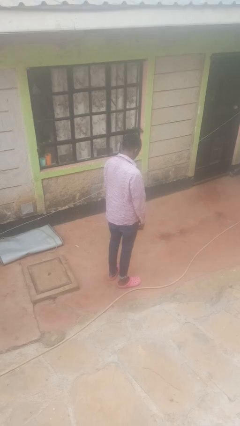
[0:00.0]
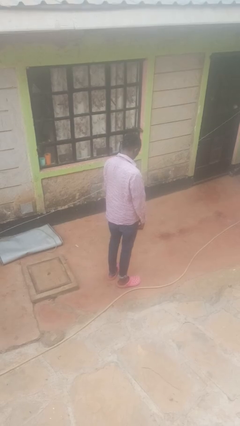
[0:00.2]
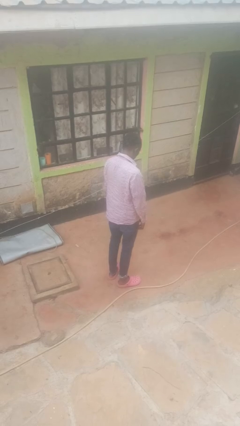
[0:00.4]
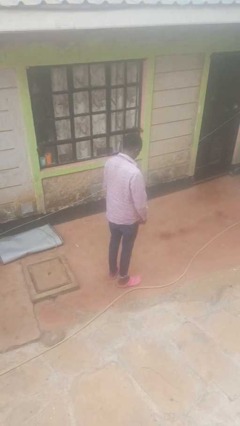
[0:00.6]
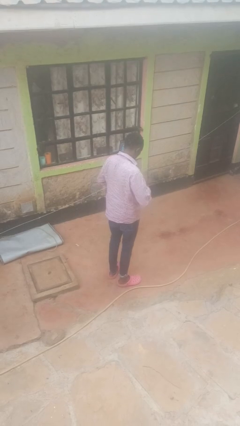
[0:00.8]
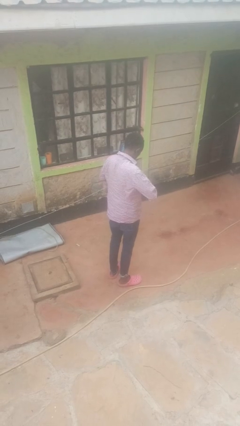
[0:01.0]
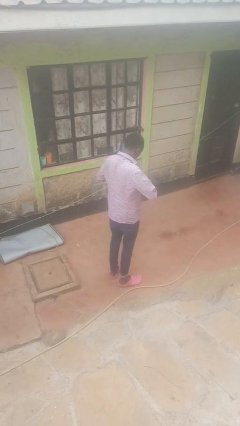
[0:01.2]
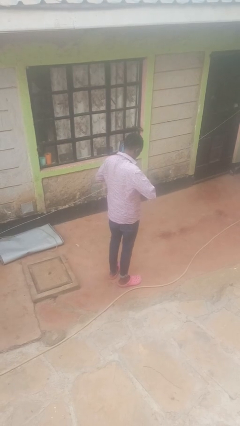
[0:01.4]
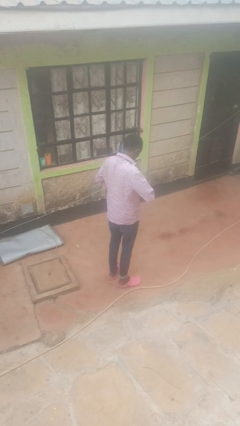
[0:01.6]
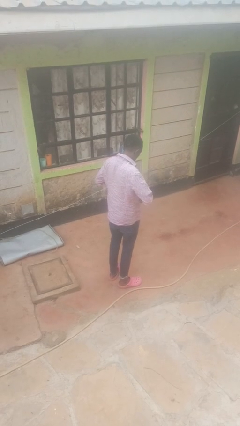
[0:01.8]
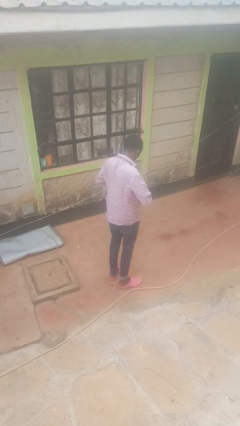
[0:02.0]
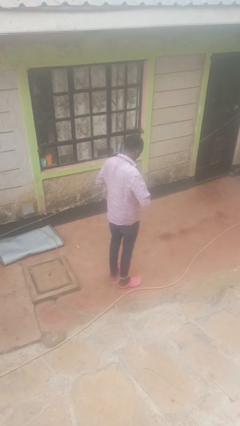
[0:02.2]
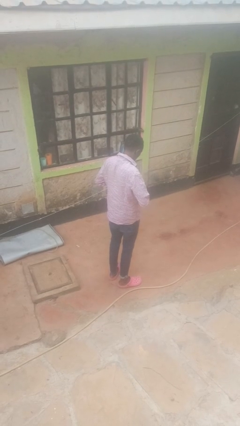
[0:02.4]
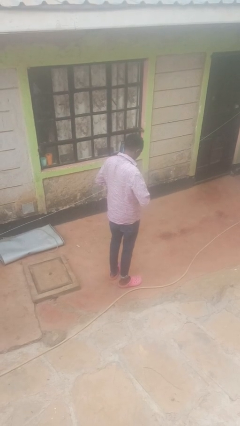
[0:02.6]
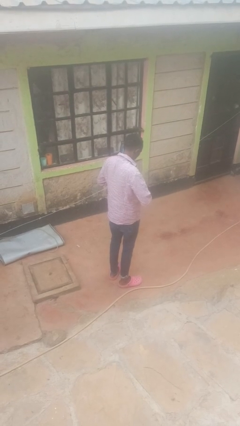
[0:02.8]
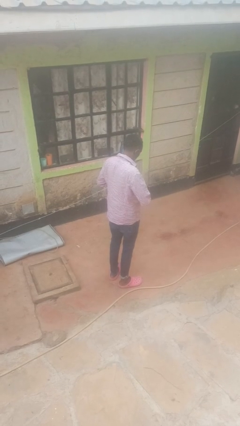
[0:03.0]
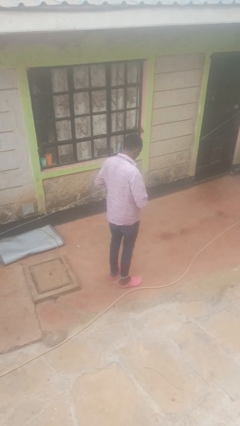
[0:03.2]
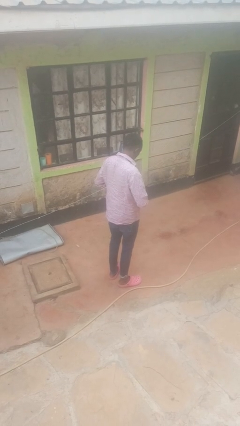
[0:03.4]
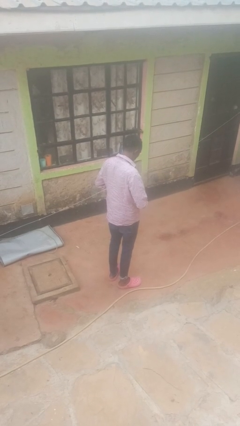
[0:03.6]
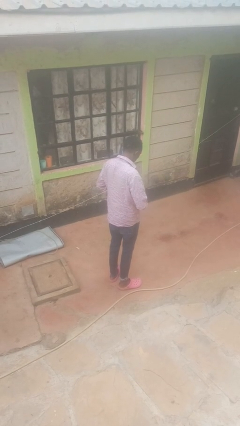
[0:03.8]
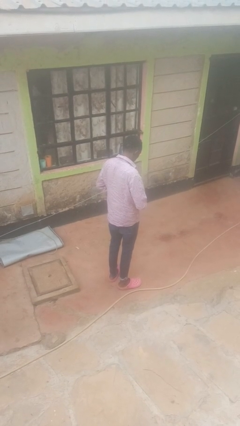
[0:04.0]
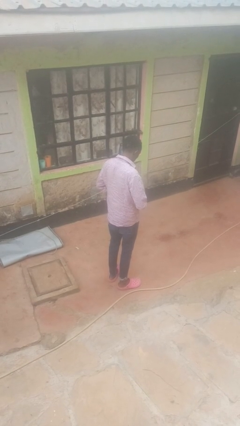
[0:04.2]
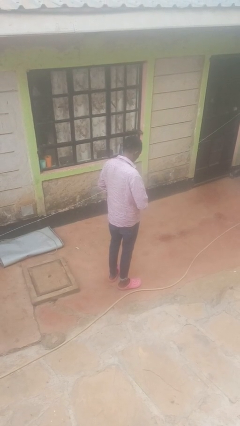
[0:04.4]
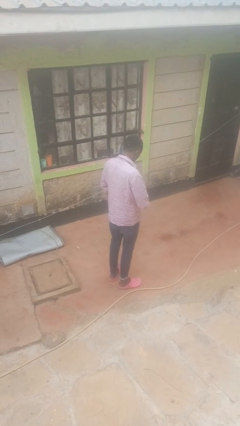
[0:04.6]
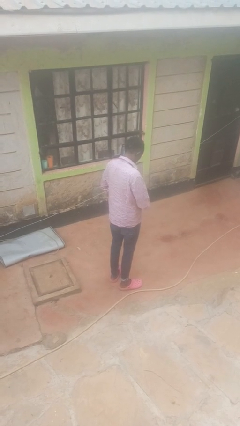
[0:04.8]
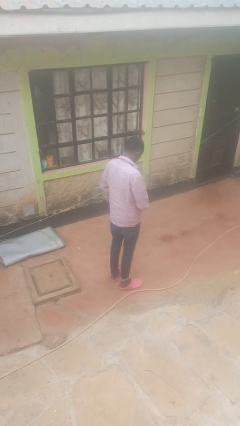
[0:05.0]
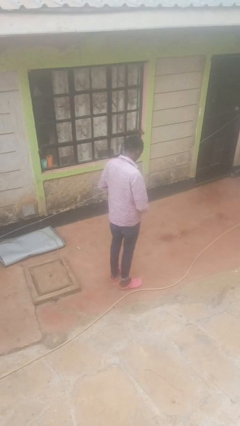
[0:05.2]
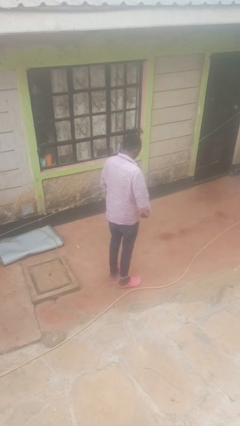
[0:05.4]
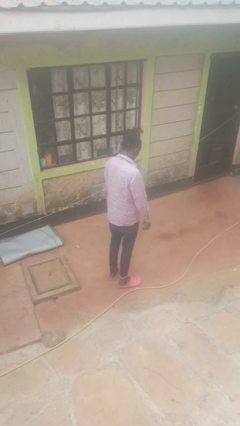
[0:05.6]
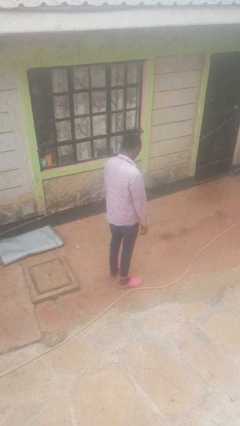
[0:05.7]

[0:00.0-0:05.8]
person unbuttons shirt

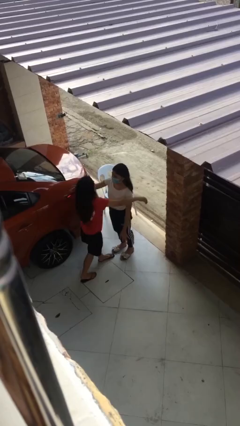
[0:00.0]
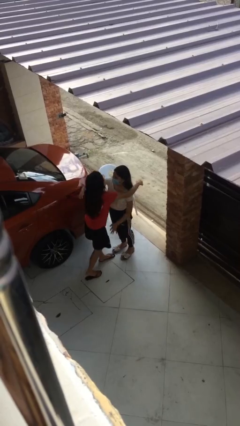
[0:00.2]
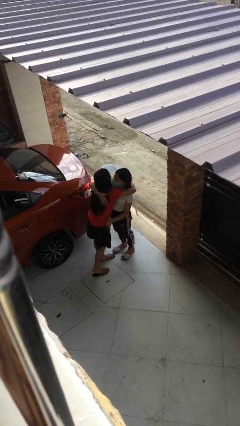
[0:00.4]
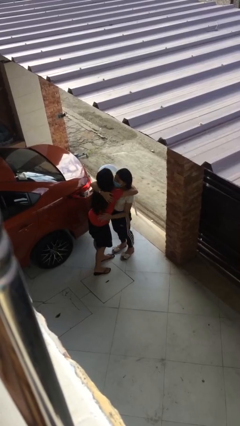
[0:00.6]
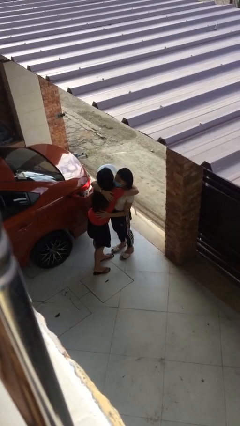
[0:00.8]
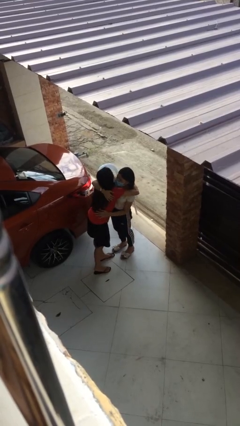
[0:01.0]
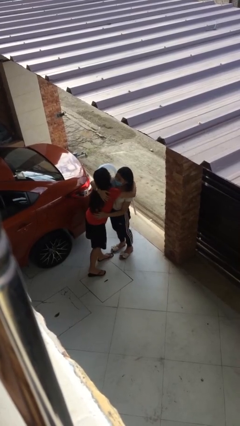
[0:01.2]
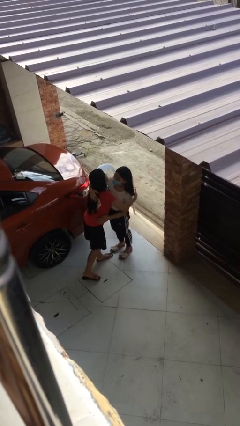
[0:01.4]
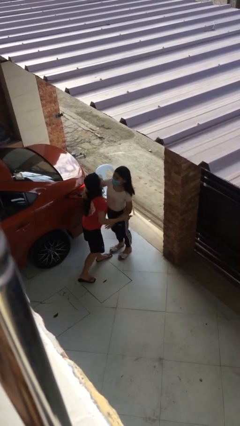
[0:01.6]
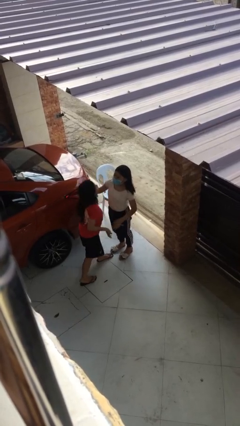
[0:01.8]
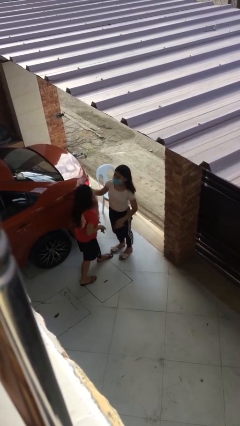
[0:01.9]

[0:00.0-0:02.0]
person embraces person

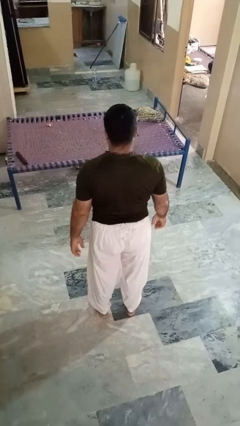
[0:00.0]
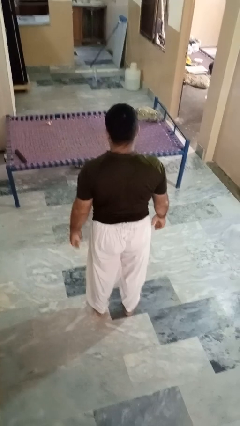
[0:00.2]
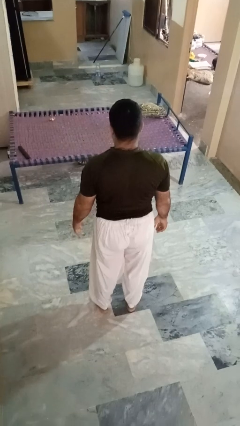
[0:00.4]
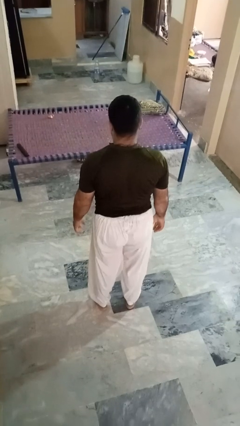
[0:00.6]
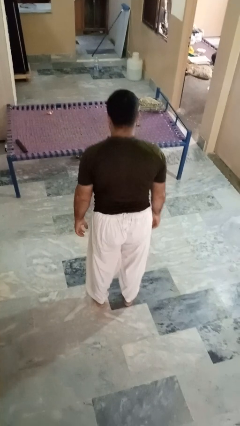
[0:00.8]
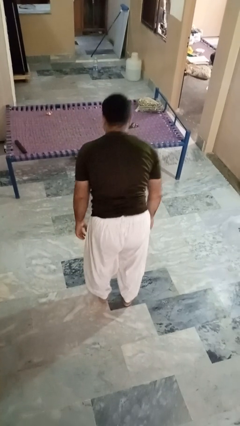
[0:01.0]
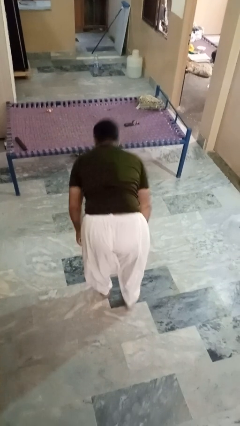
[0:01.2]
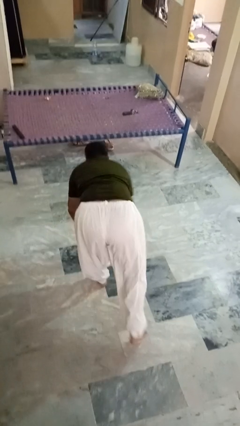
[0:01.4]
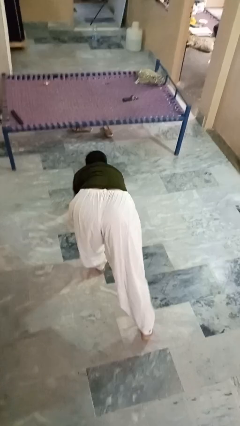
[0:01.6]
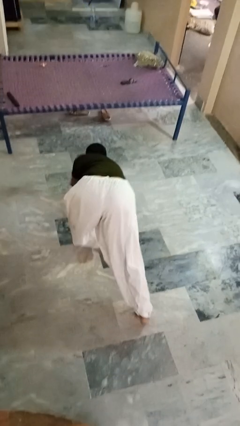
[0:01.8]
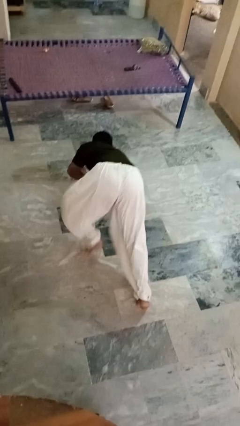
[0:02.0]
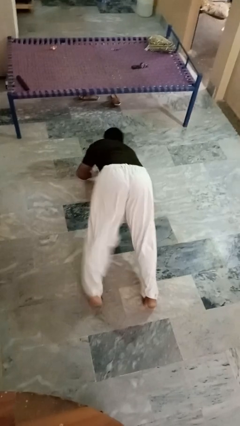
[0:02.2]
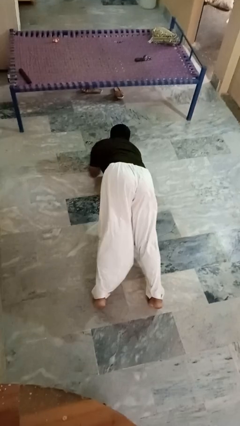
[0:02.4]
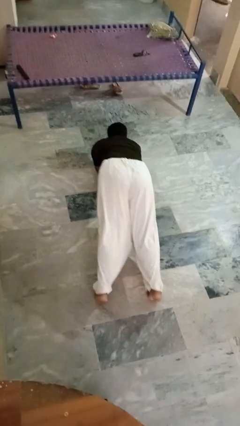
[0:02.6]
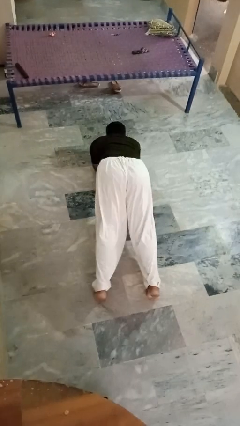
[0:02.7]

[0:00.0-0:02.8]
person exercises with plank

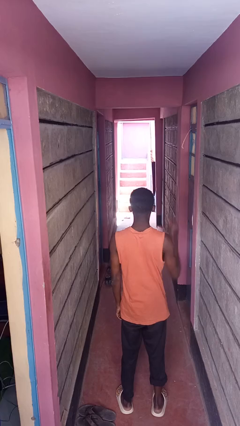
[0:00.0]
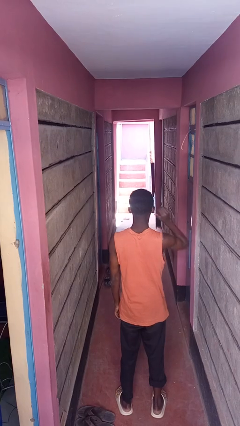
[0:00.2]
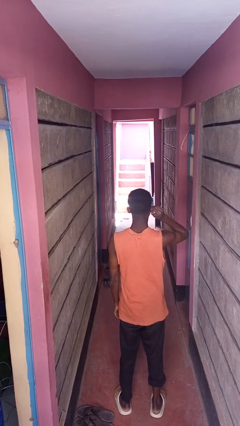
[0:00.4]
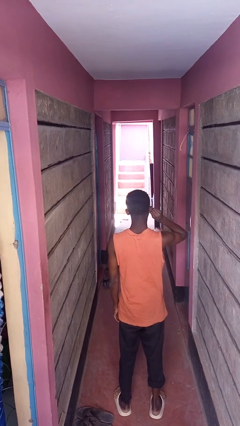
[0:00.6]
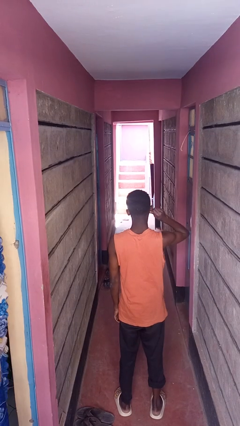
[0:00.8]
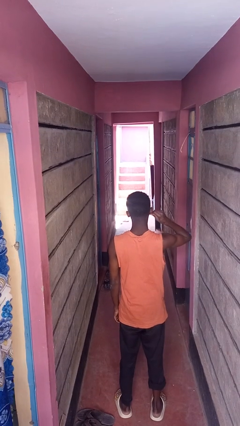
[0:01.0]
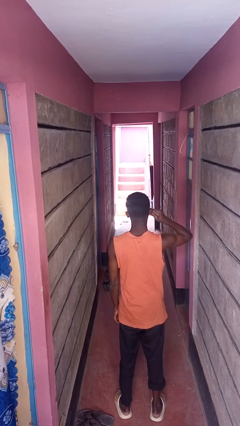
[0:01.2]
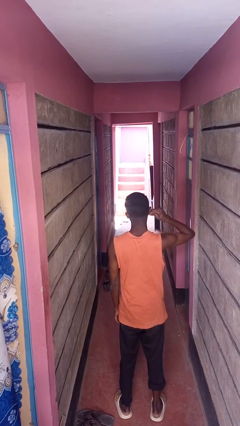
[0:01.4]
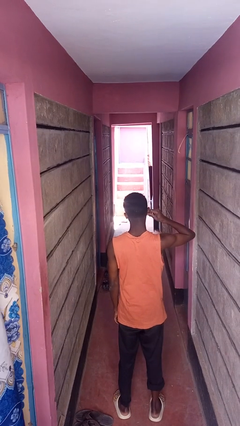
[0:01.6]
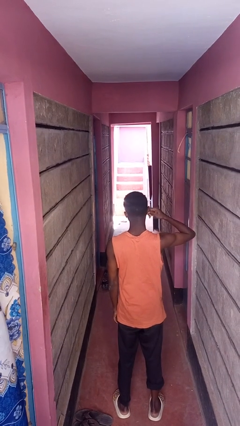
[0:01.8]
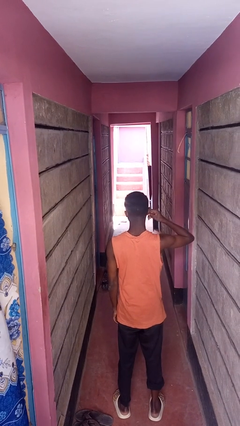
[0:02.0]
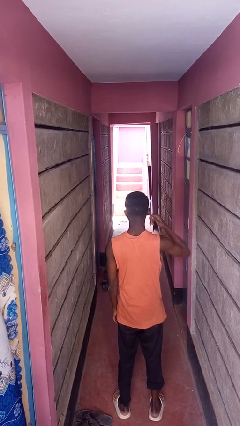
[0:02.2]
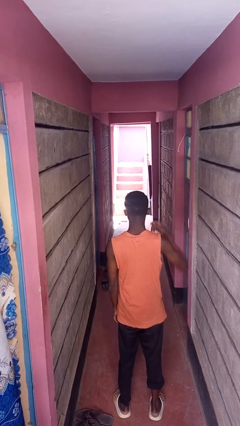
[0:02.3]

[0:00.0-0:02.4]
person touches earlobe

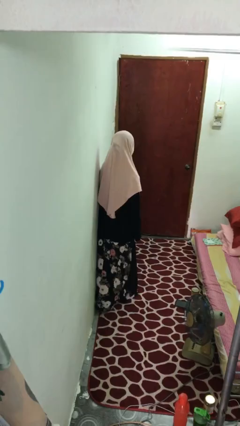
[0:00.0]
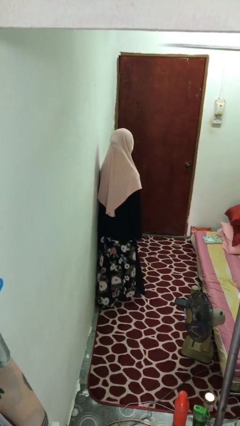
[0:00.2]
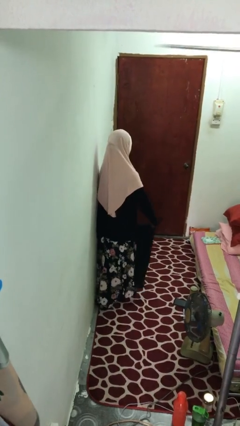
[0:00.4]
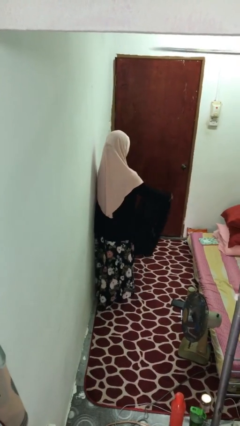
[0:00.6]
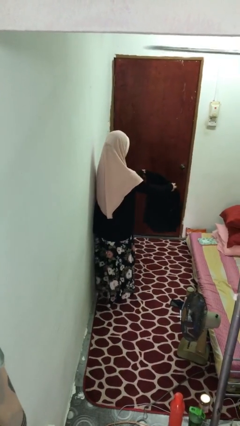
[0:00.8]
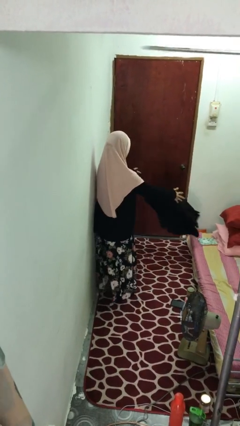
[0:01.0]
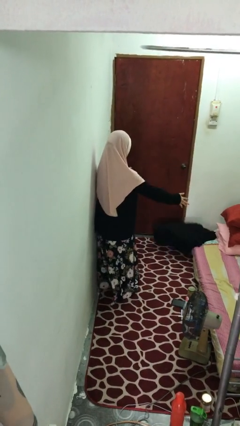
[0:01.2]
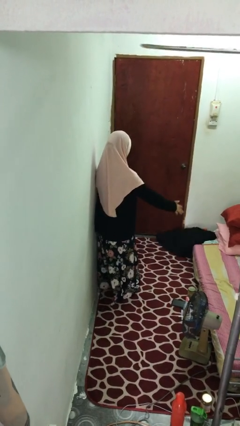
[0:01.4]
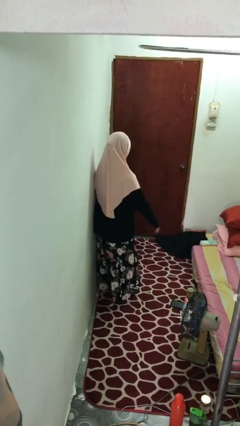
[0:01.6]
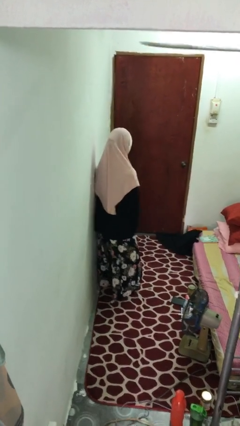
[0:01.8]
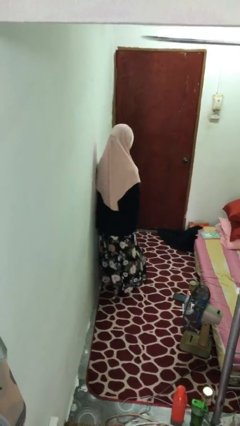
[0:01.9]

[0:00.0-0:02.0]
person throws object to ground

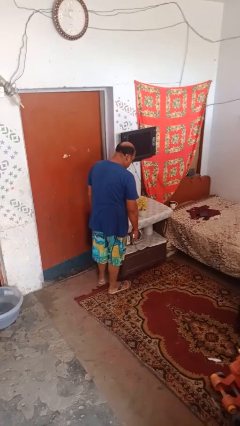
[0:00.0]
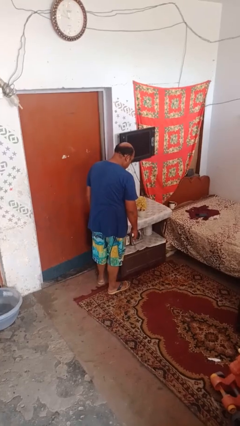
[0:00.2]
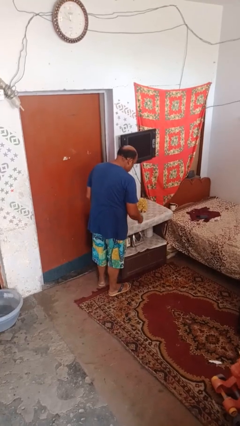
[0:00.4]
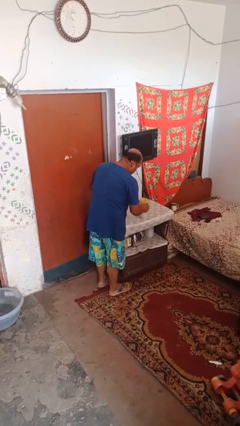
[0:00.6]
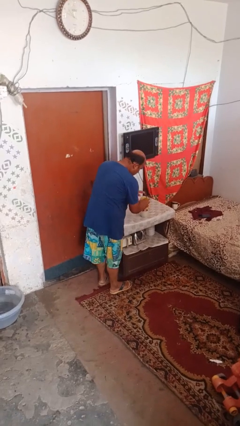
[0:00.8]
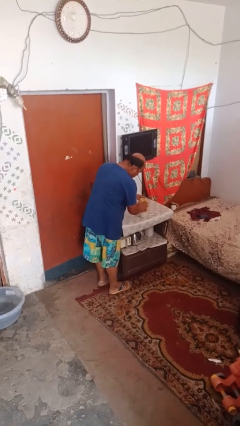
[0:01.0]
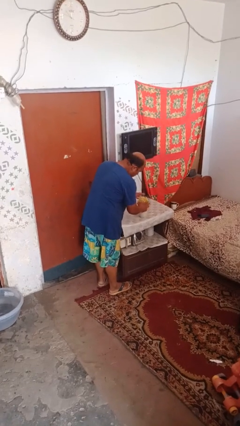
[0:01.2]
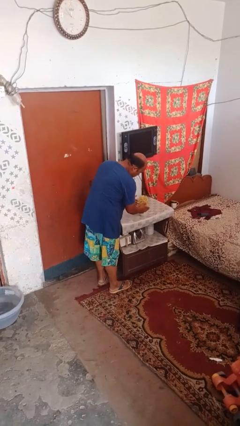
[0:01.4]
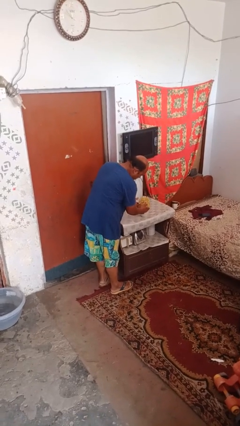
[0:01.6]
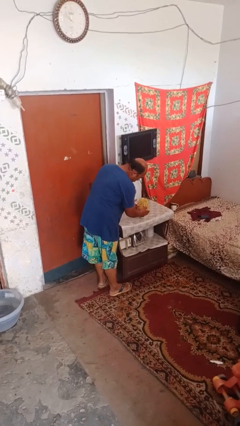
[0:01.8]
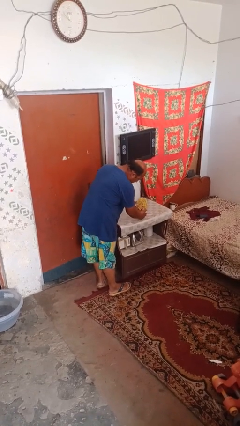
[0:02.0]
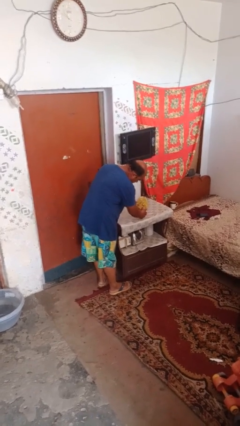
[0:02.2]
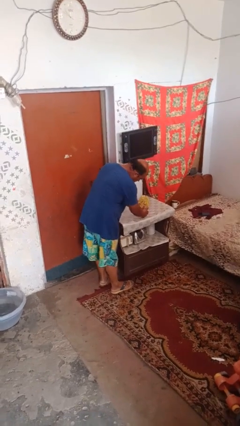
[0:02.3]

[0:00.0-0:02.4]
person arranges flowers in vase

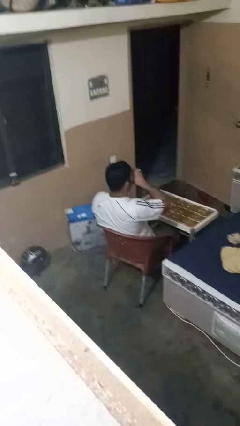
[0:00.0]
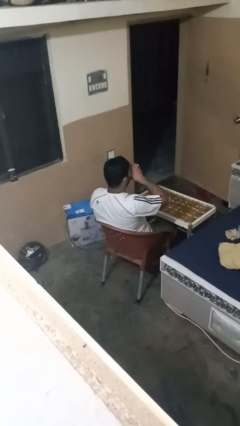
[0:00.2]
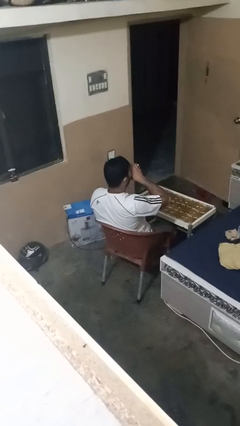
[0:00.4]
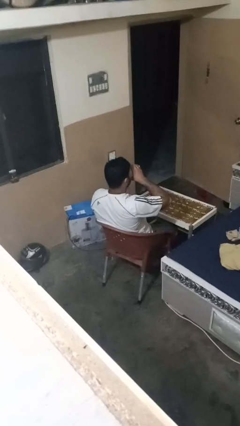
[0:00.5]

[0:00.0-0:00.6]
person puts down object on table
